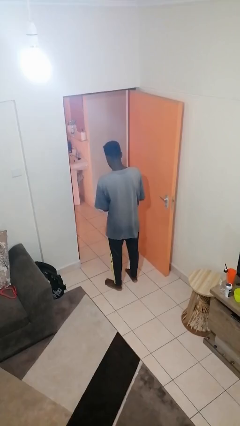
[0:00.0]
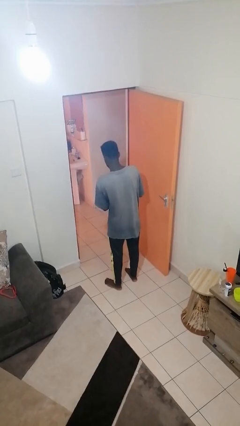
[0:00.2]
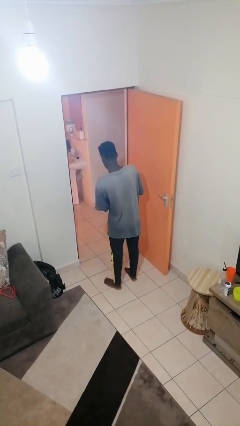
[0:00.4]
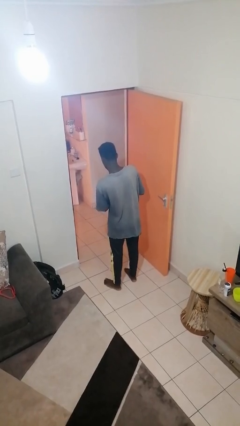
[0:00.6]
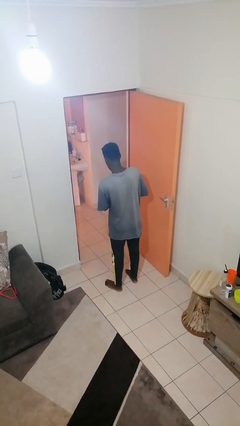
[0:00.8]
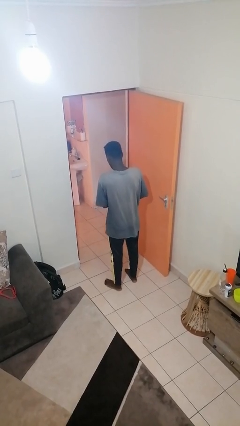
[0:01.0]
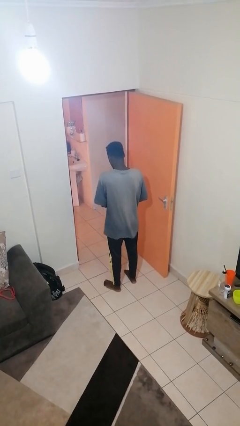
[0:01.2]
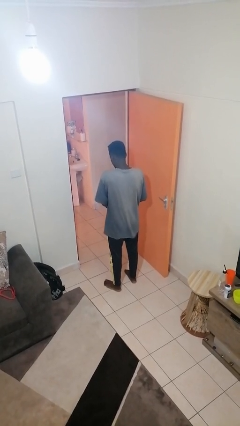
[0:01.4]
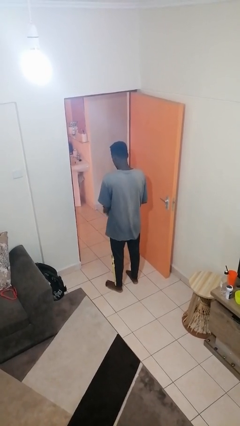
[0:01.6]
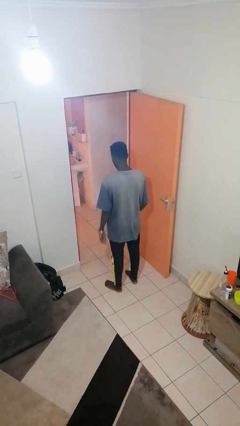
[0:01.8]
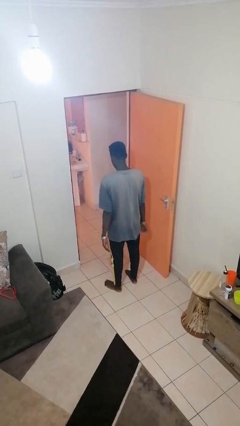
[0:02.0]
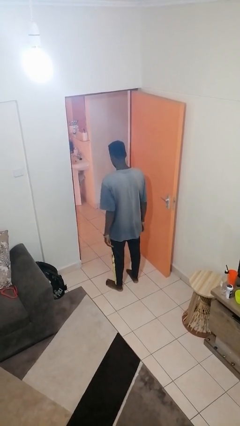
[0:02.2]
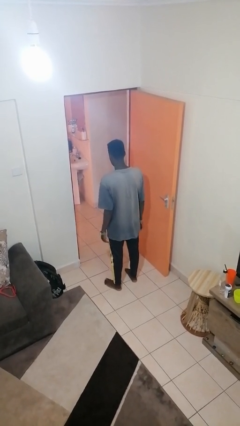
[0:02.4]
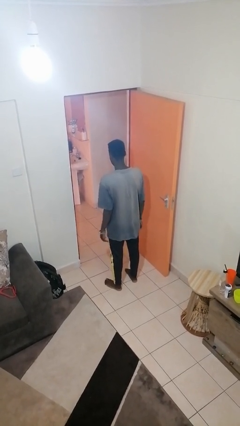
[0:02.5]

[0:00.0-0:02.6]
person puts on wristwatch

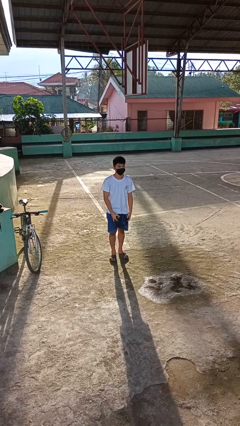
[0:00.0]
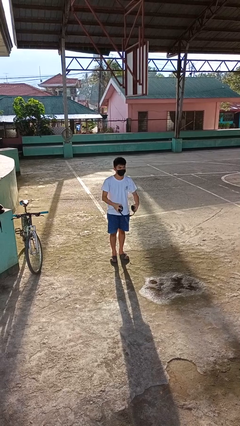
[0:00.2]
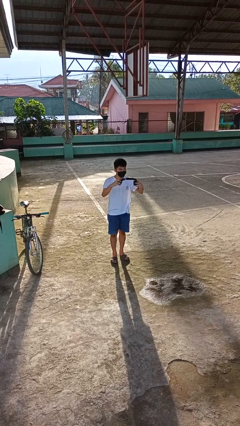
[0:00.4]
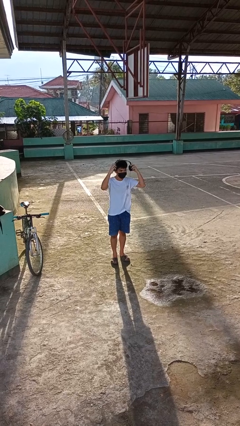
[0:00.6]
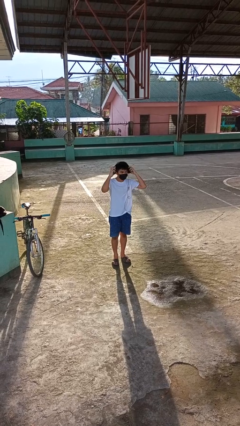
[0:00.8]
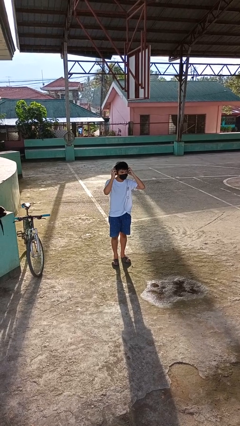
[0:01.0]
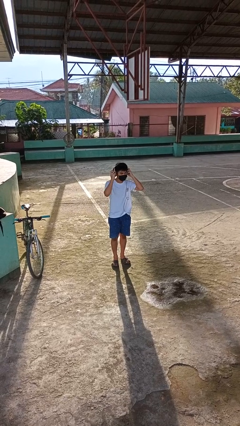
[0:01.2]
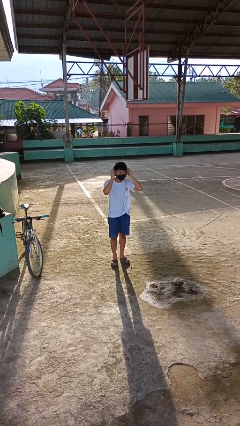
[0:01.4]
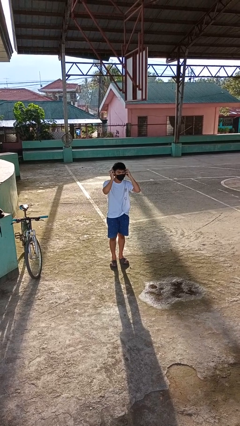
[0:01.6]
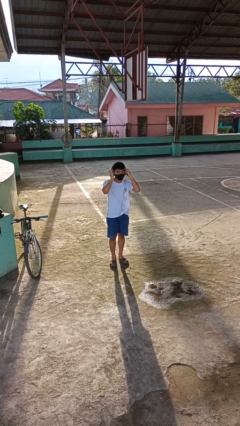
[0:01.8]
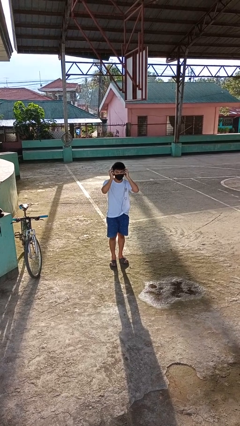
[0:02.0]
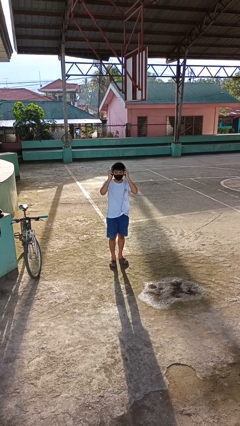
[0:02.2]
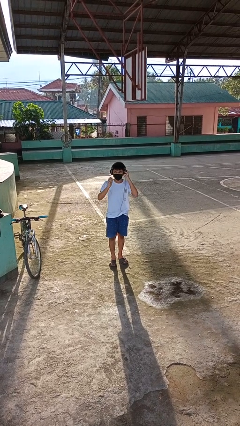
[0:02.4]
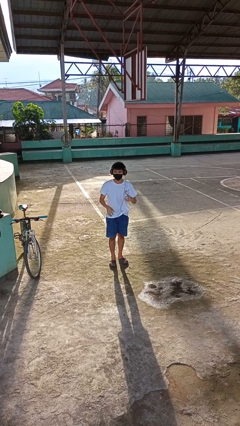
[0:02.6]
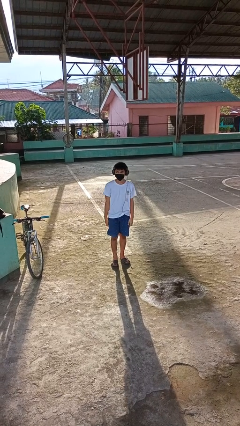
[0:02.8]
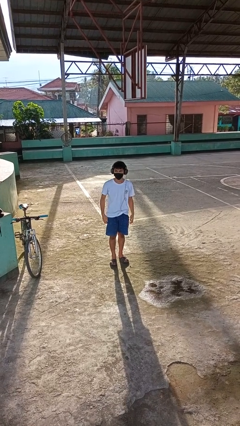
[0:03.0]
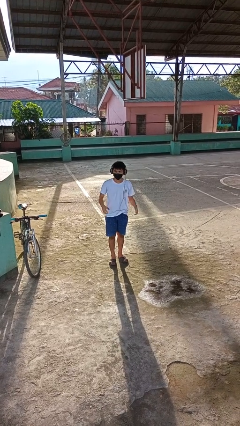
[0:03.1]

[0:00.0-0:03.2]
person puts on headphones

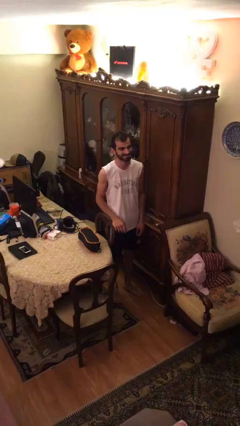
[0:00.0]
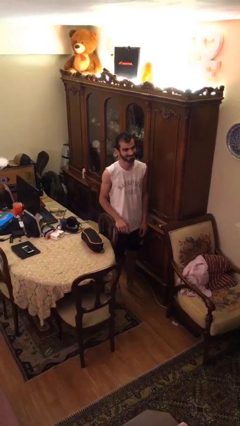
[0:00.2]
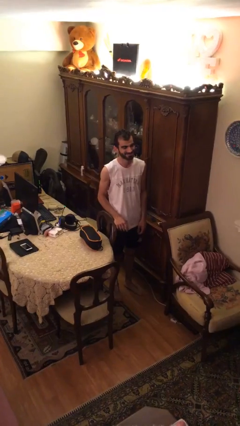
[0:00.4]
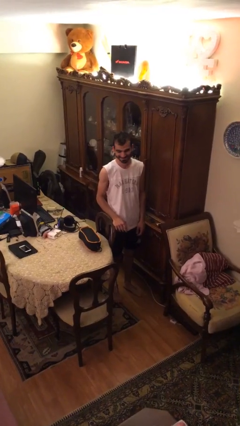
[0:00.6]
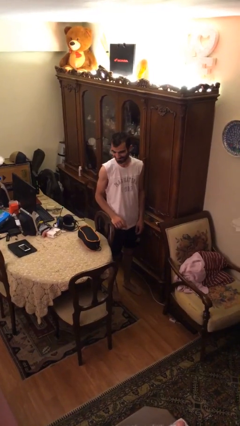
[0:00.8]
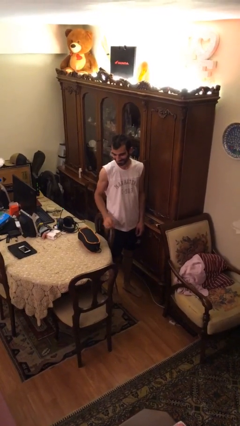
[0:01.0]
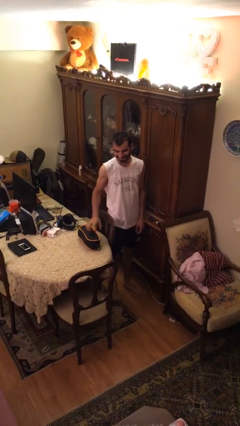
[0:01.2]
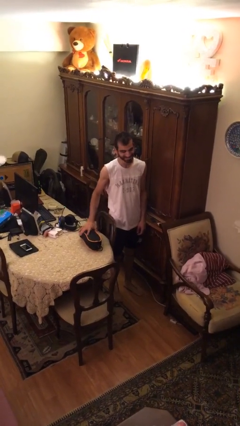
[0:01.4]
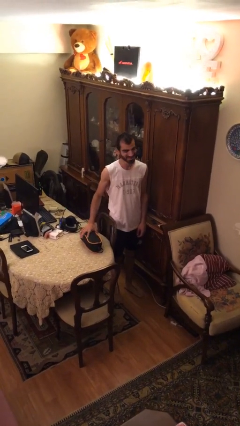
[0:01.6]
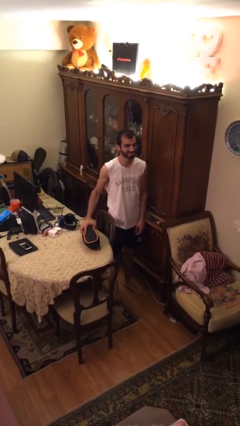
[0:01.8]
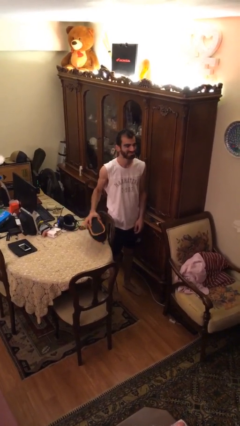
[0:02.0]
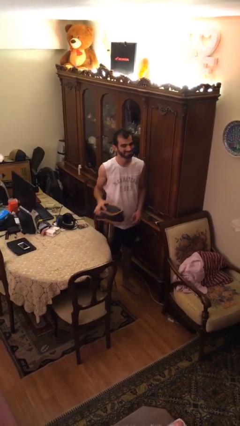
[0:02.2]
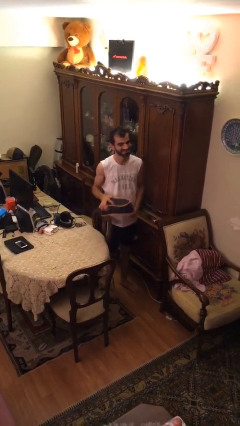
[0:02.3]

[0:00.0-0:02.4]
person picks up object from table

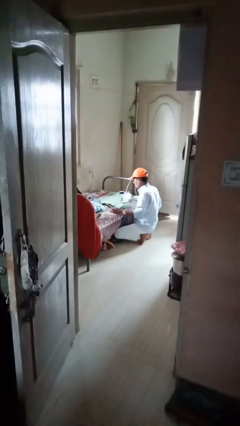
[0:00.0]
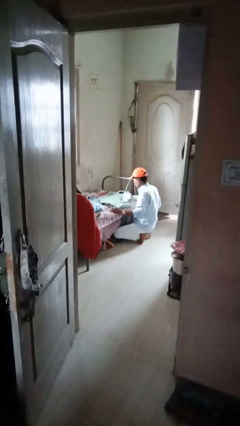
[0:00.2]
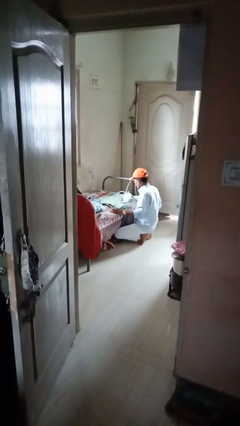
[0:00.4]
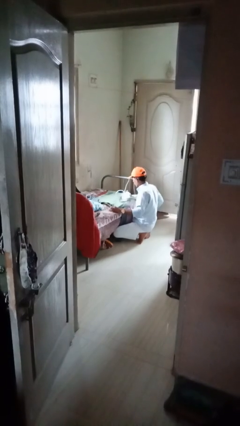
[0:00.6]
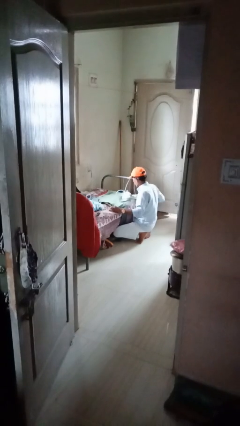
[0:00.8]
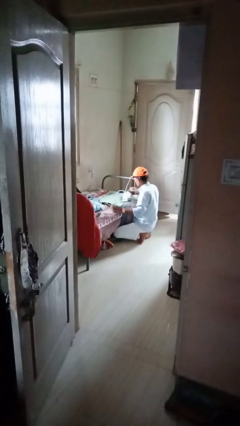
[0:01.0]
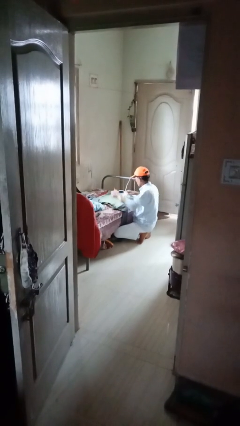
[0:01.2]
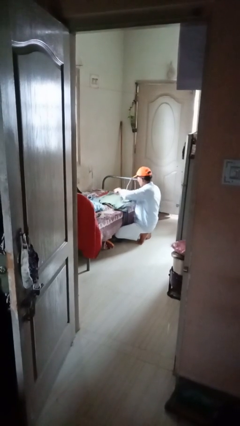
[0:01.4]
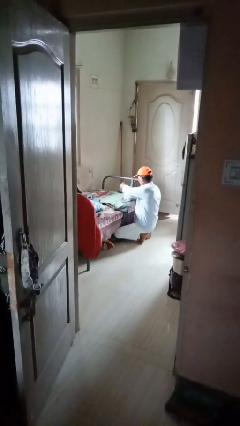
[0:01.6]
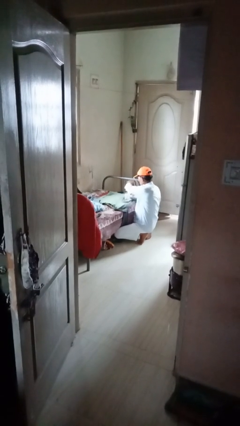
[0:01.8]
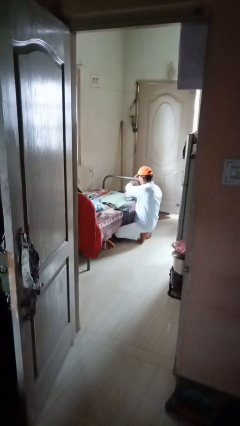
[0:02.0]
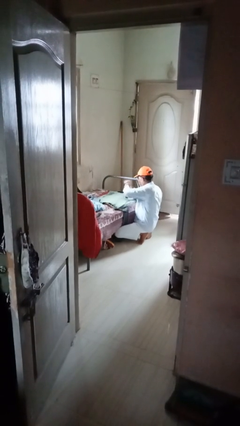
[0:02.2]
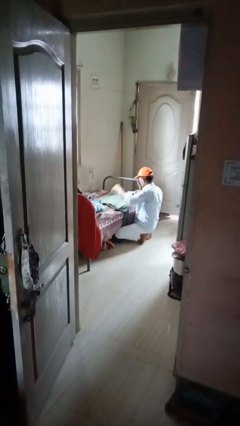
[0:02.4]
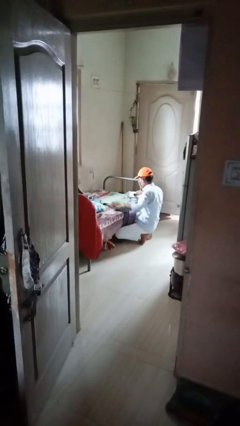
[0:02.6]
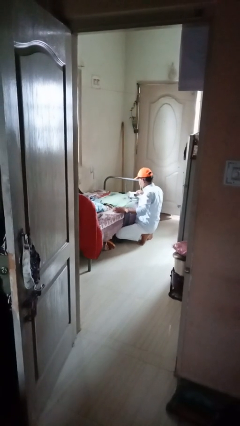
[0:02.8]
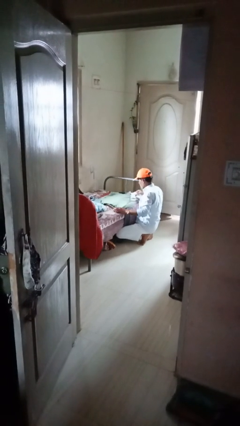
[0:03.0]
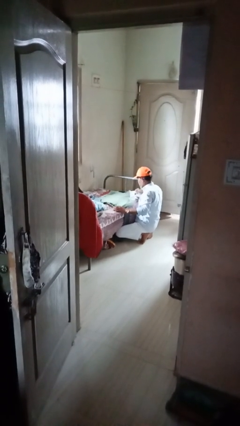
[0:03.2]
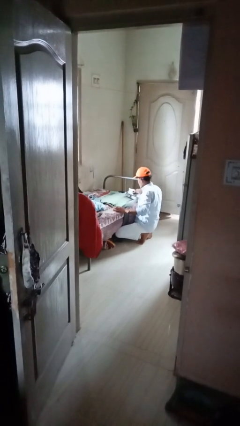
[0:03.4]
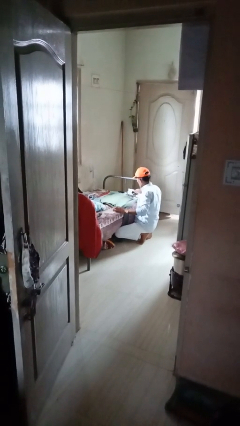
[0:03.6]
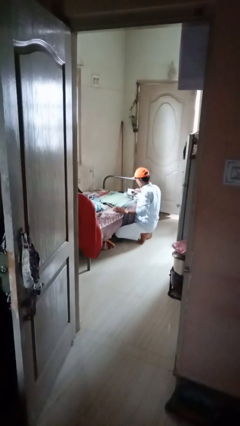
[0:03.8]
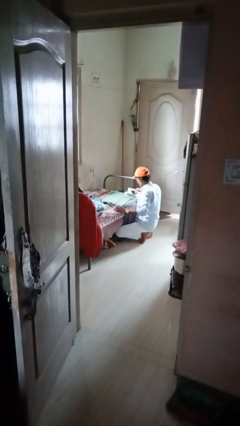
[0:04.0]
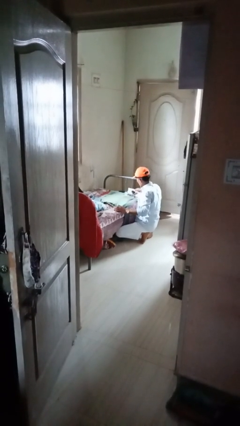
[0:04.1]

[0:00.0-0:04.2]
person irons clothes

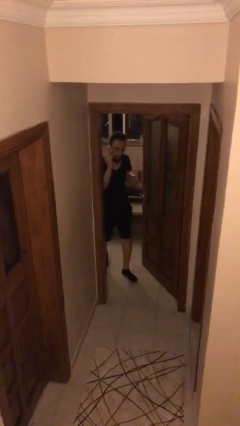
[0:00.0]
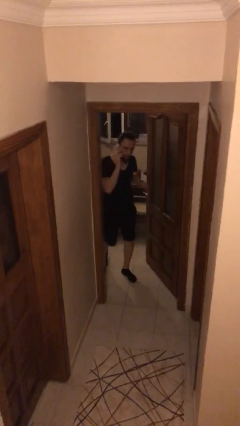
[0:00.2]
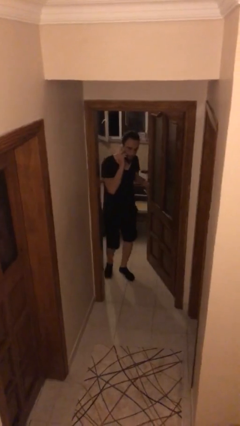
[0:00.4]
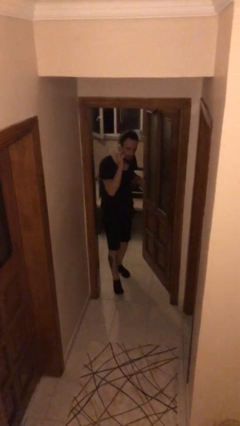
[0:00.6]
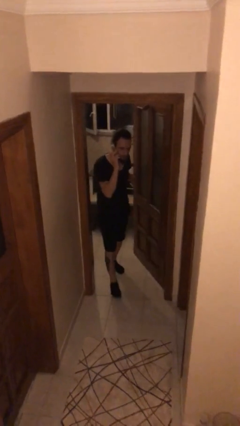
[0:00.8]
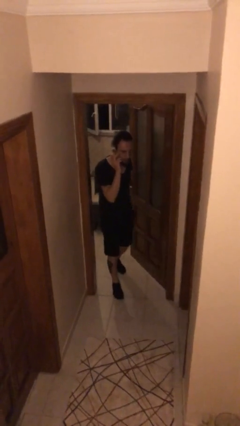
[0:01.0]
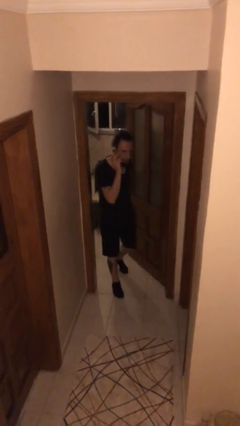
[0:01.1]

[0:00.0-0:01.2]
person enters scene through structure

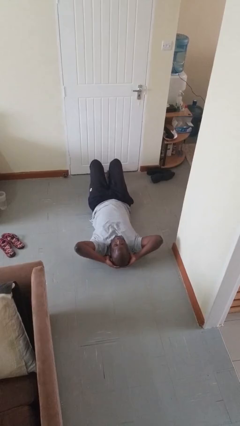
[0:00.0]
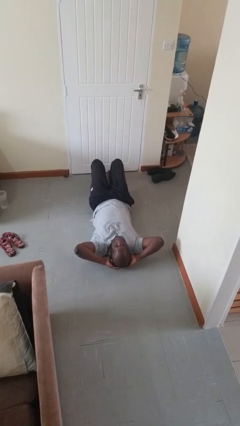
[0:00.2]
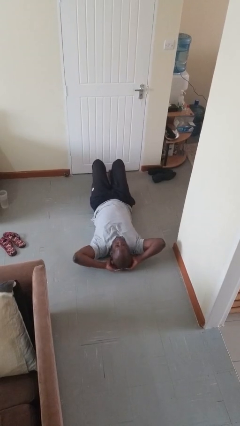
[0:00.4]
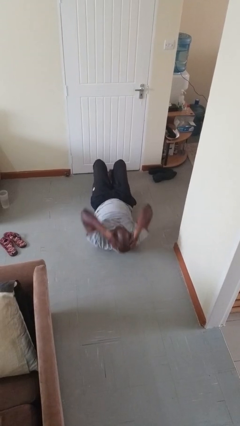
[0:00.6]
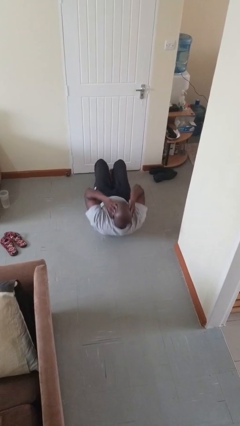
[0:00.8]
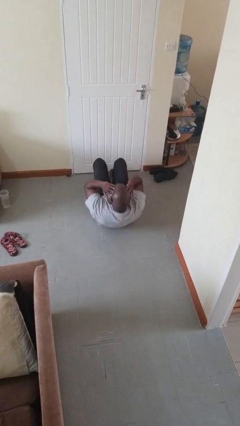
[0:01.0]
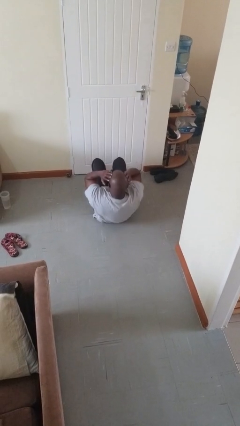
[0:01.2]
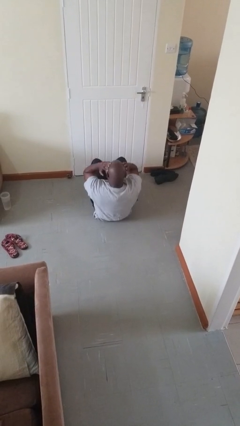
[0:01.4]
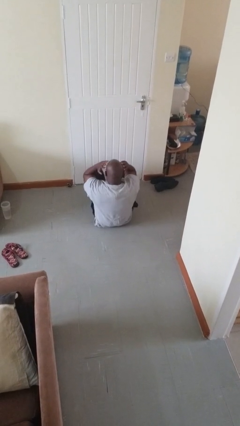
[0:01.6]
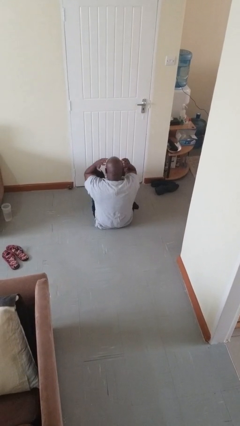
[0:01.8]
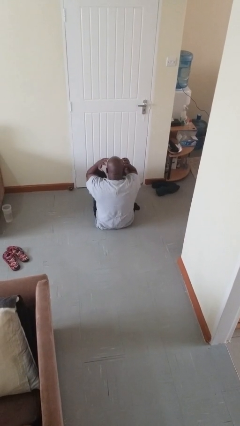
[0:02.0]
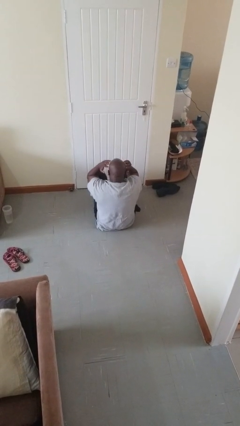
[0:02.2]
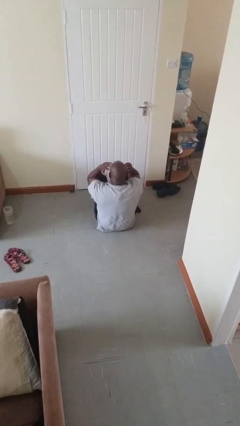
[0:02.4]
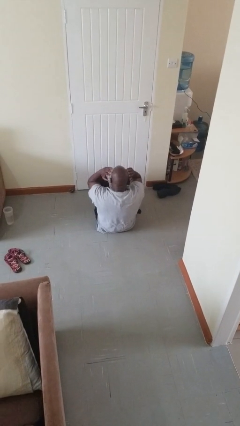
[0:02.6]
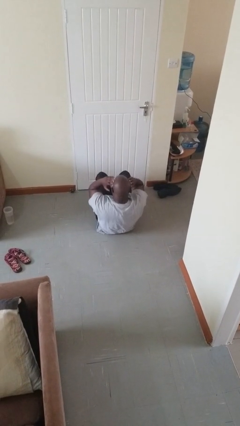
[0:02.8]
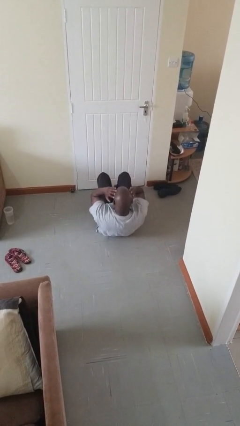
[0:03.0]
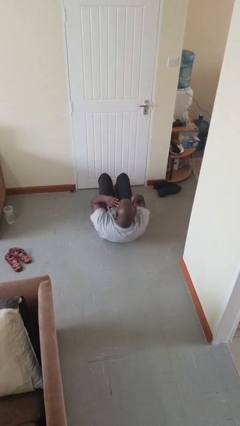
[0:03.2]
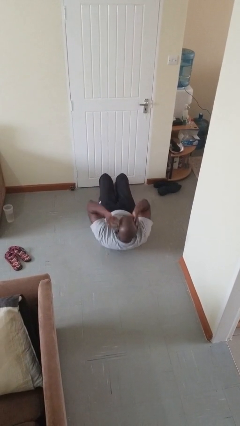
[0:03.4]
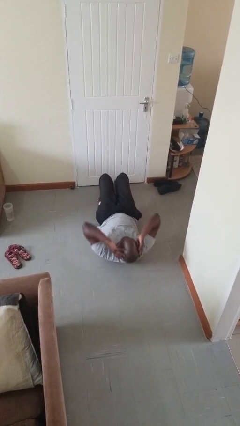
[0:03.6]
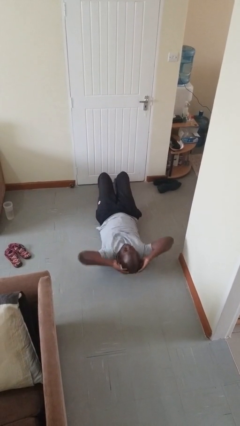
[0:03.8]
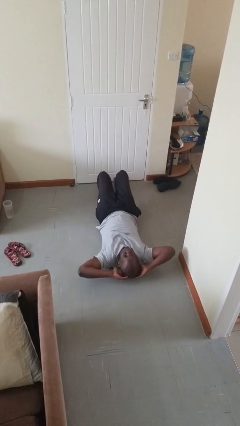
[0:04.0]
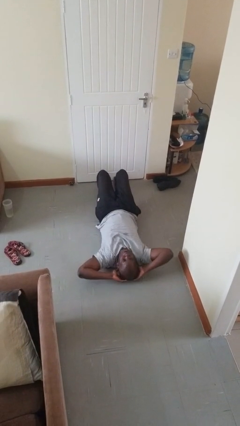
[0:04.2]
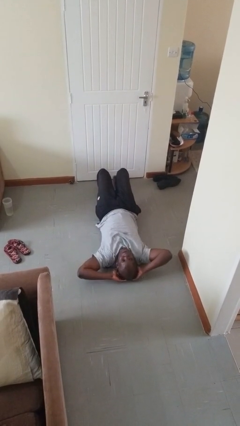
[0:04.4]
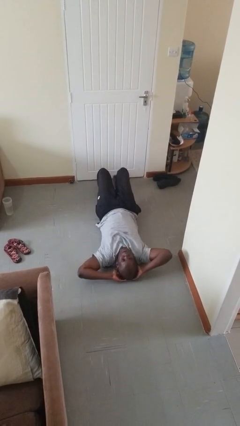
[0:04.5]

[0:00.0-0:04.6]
person exercises with situp
